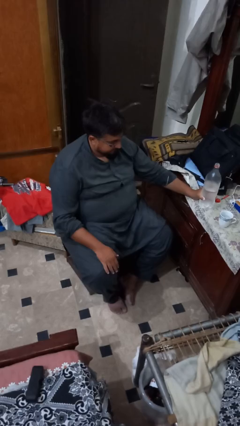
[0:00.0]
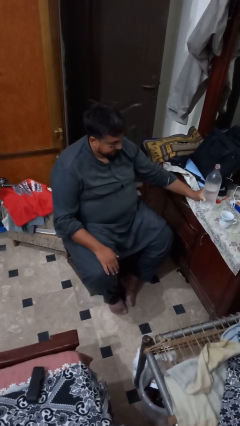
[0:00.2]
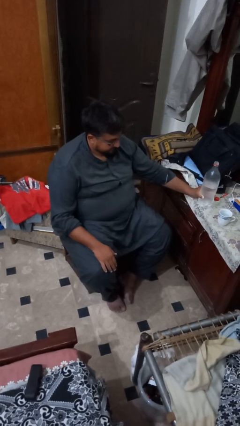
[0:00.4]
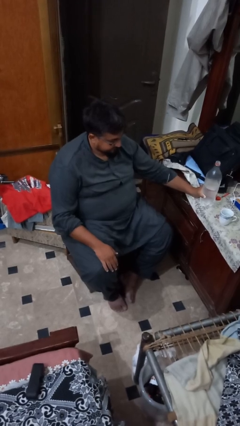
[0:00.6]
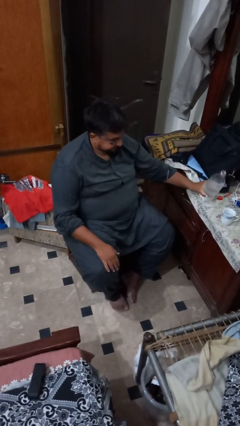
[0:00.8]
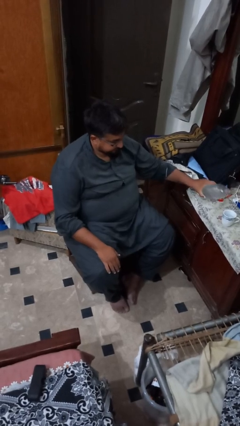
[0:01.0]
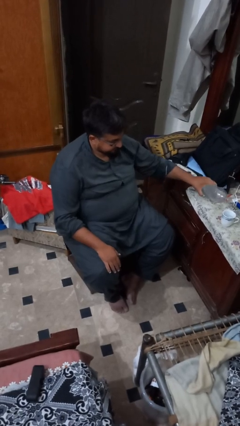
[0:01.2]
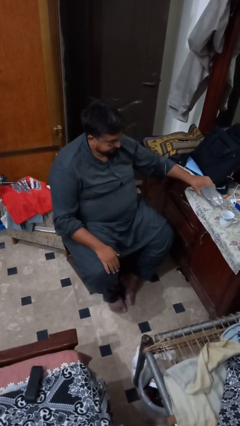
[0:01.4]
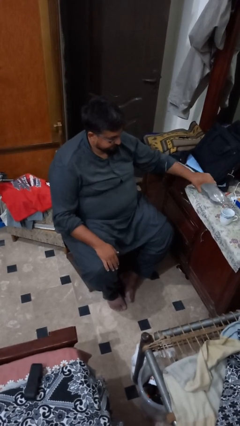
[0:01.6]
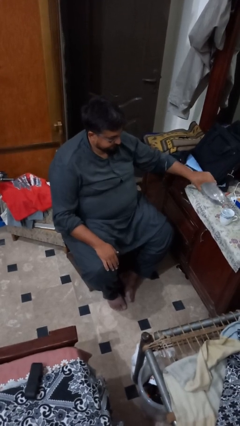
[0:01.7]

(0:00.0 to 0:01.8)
person pours liquid into cup

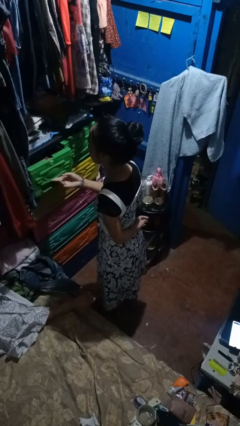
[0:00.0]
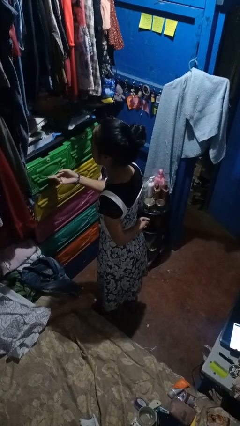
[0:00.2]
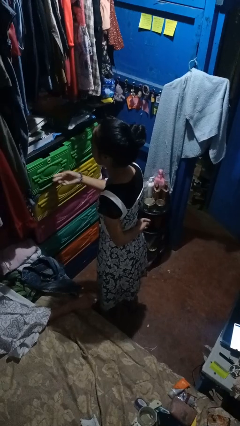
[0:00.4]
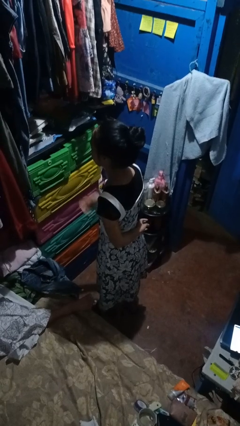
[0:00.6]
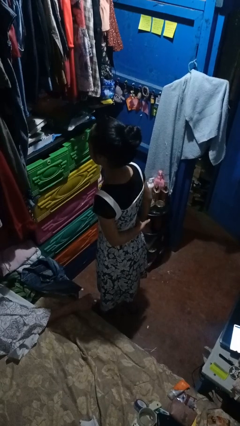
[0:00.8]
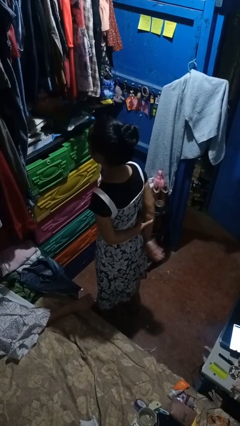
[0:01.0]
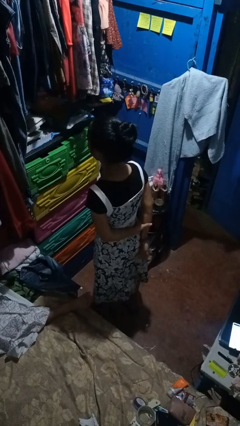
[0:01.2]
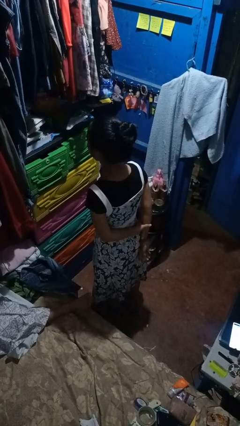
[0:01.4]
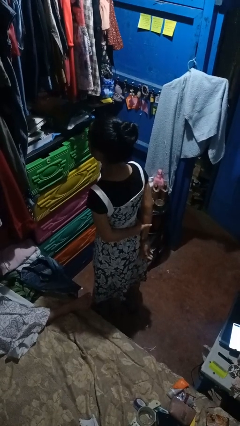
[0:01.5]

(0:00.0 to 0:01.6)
person closes dresser drawer

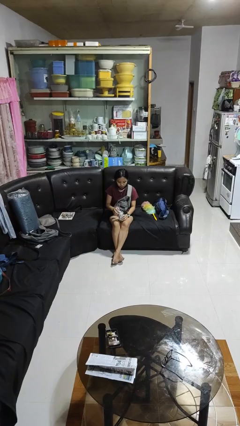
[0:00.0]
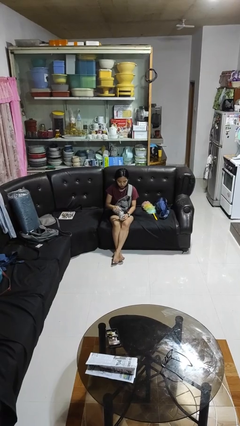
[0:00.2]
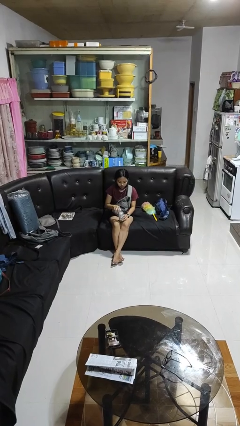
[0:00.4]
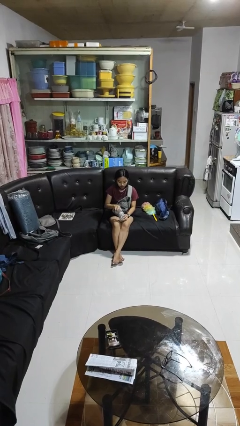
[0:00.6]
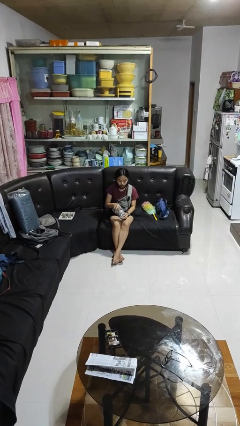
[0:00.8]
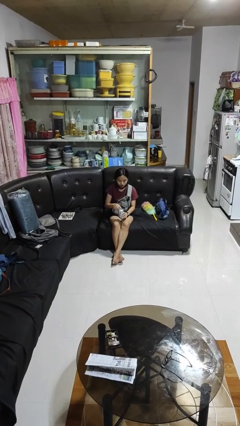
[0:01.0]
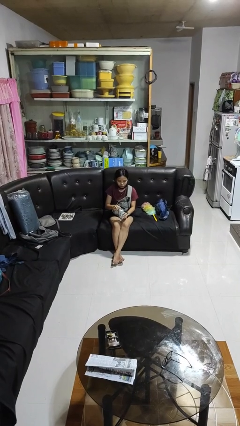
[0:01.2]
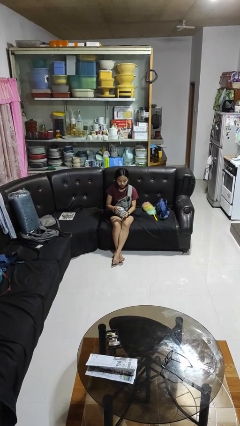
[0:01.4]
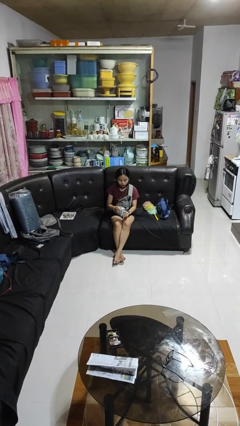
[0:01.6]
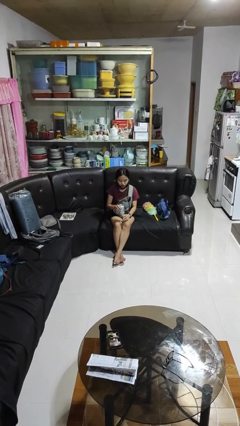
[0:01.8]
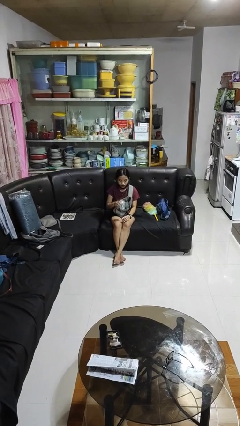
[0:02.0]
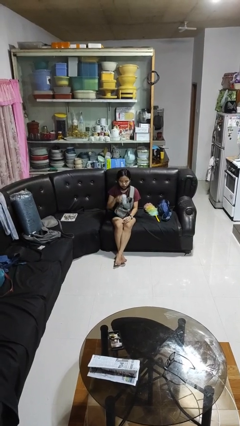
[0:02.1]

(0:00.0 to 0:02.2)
person opens beverage can

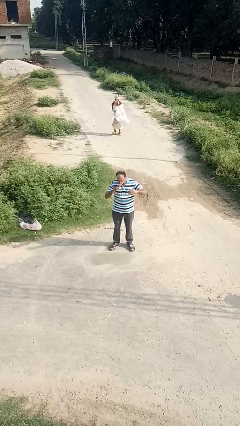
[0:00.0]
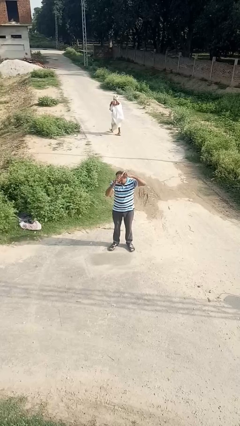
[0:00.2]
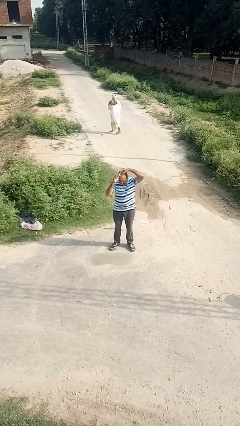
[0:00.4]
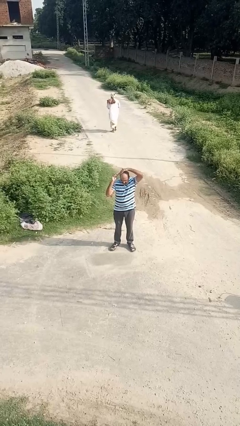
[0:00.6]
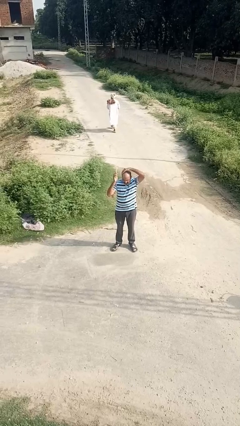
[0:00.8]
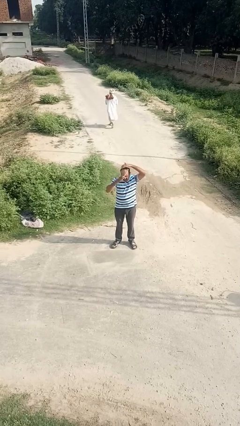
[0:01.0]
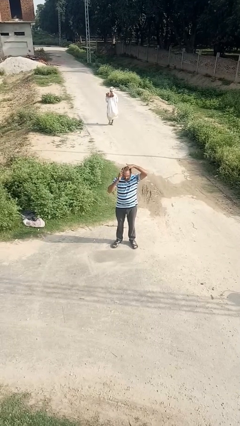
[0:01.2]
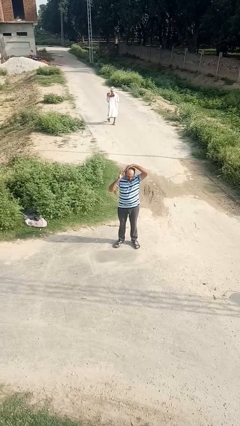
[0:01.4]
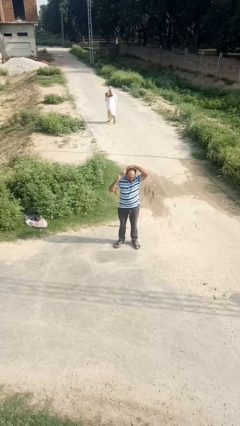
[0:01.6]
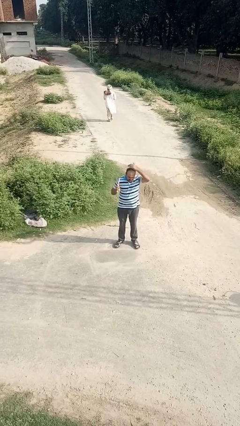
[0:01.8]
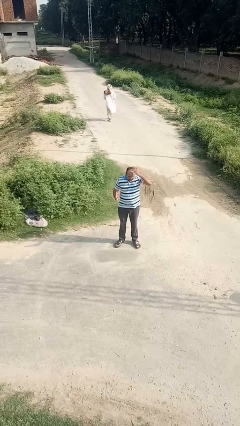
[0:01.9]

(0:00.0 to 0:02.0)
person brushes hair

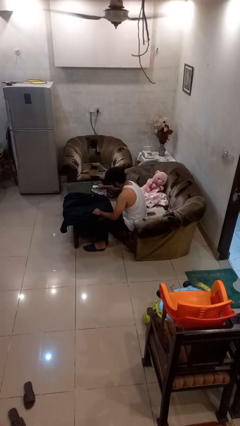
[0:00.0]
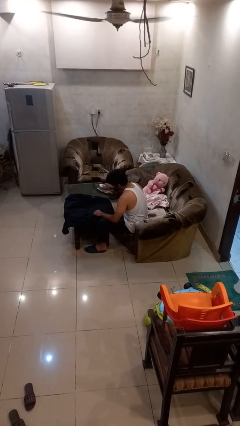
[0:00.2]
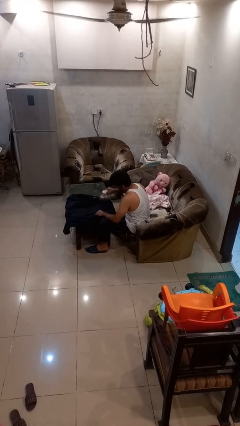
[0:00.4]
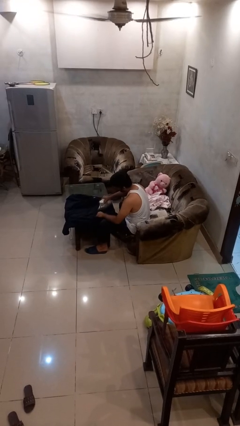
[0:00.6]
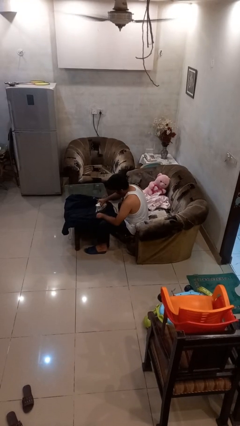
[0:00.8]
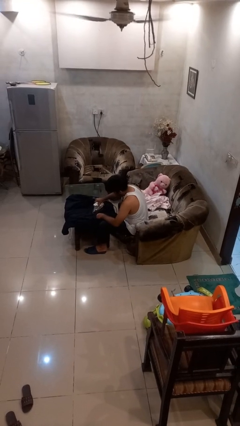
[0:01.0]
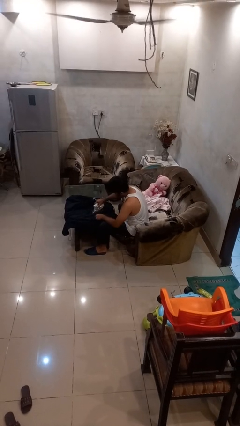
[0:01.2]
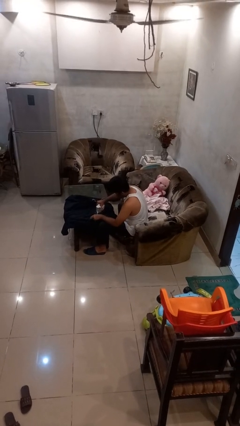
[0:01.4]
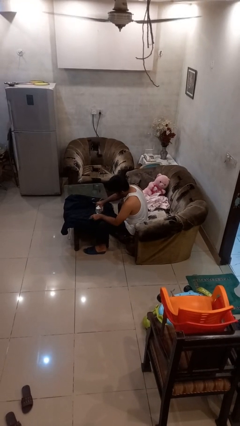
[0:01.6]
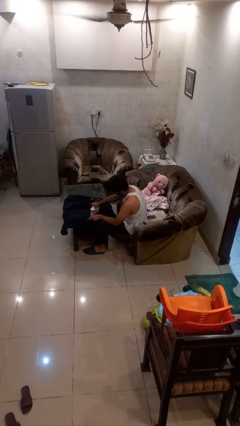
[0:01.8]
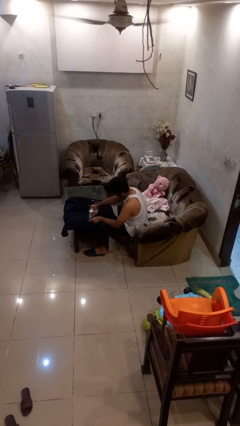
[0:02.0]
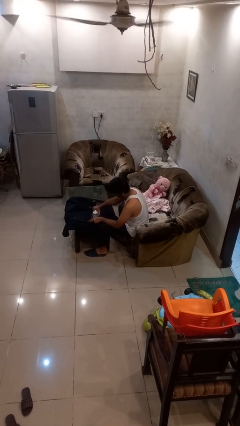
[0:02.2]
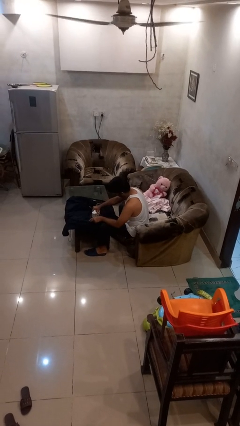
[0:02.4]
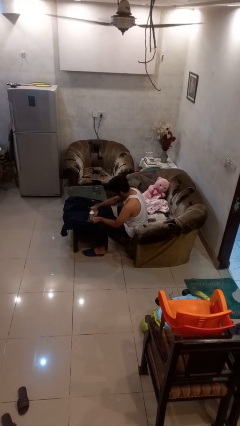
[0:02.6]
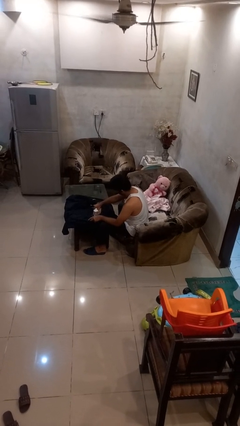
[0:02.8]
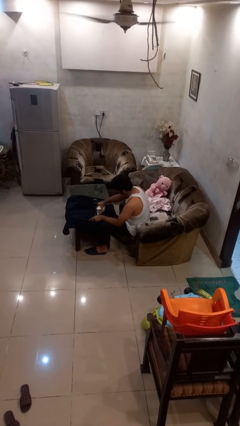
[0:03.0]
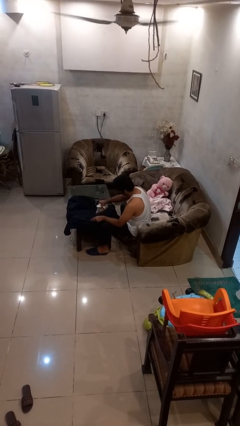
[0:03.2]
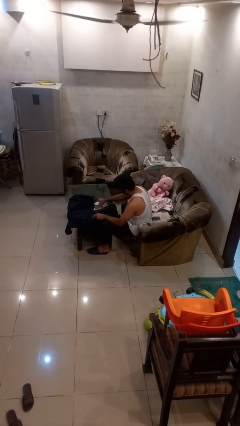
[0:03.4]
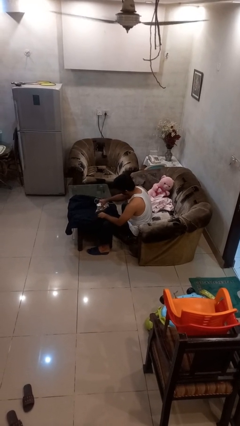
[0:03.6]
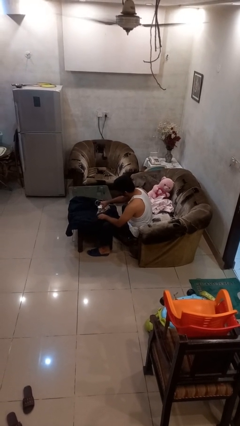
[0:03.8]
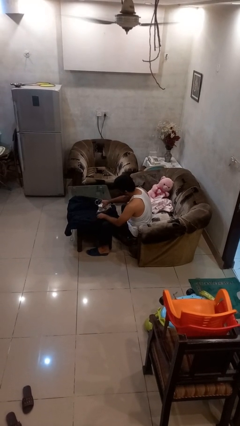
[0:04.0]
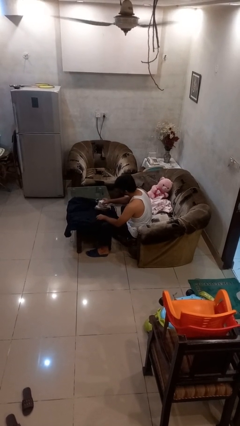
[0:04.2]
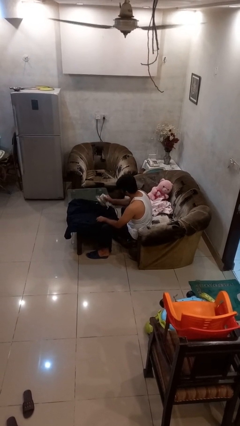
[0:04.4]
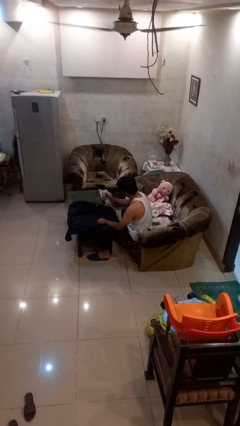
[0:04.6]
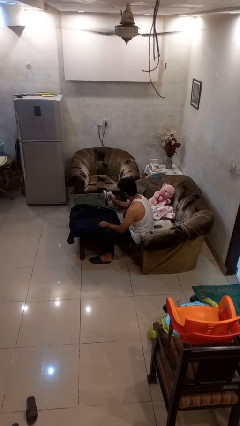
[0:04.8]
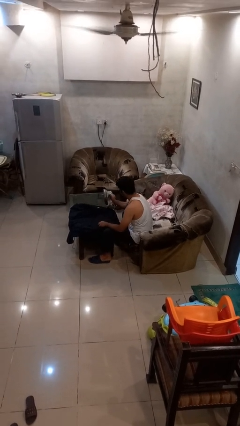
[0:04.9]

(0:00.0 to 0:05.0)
person irons clothes

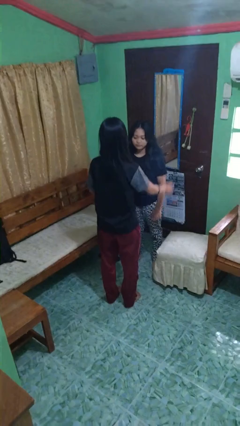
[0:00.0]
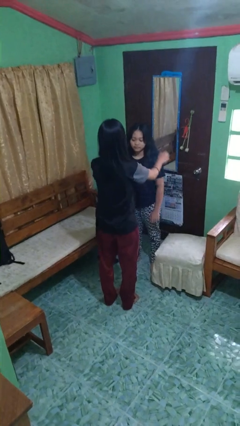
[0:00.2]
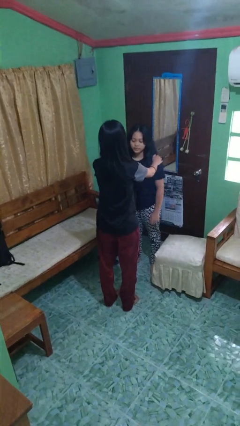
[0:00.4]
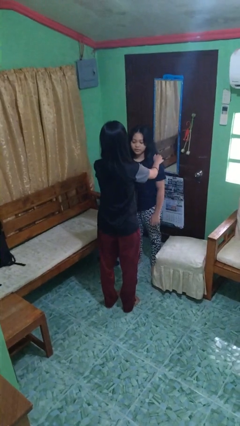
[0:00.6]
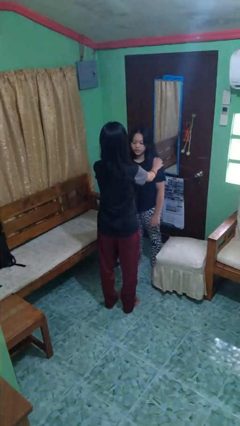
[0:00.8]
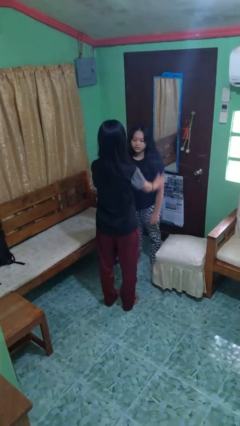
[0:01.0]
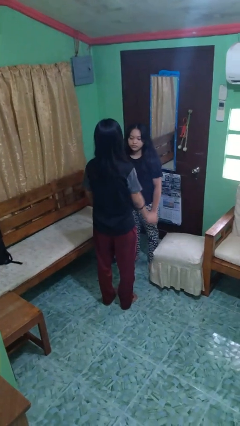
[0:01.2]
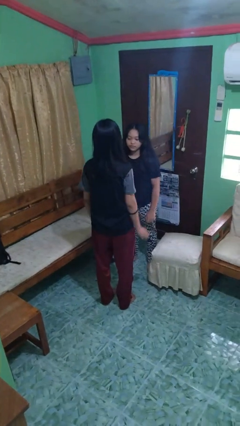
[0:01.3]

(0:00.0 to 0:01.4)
person pounds shoulders of person

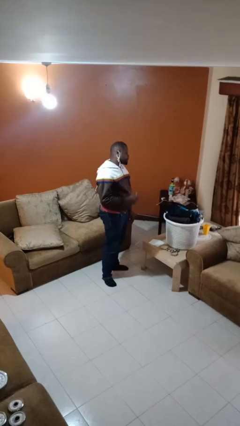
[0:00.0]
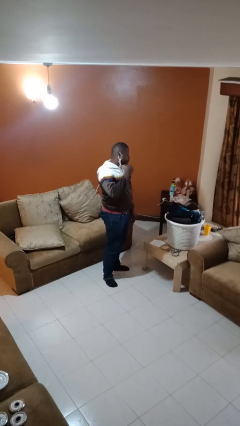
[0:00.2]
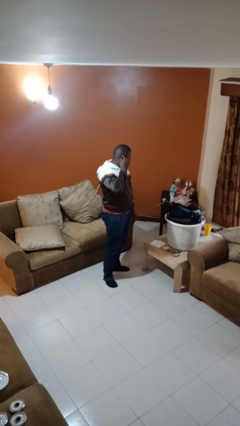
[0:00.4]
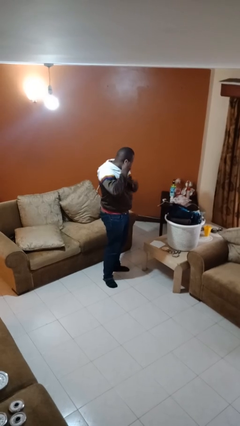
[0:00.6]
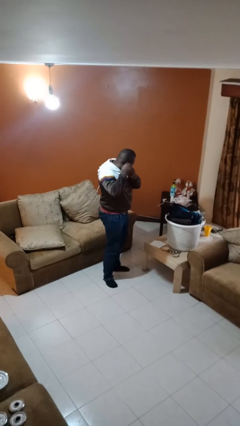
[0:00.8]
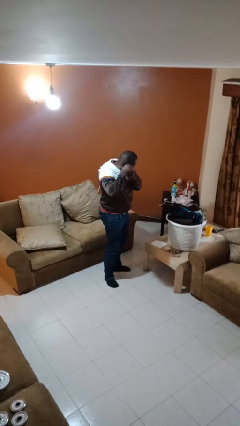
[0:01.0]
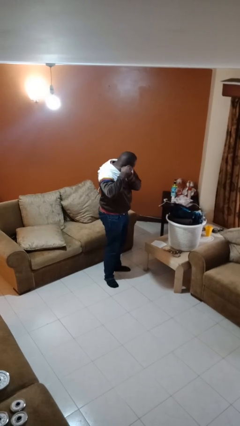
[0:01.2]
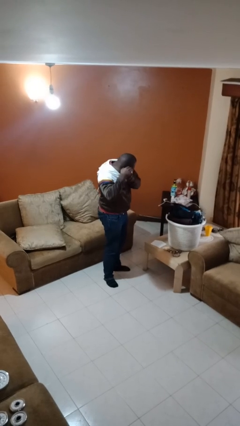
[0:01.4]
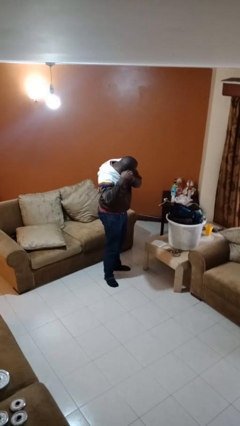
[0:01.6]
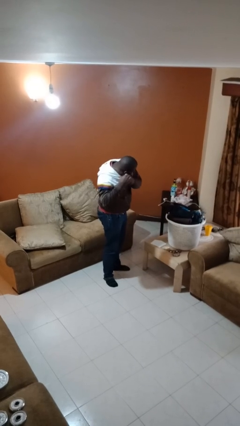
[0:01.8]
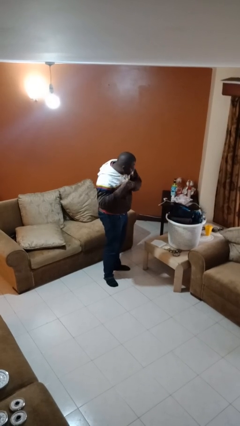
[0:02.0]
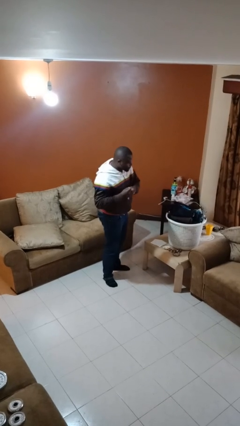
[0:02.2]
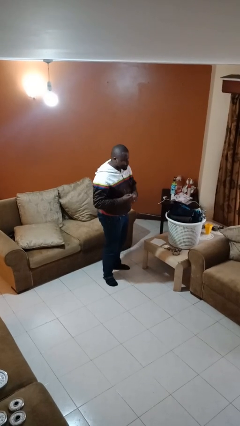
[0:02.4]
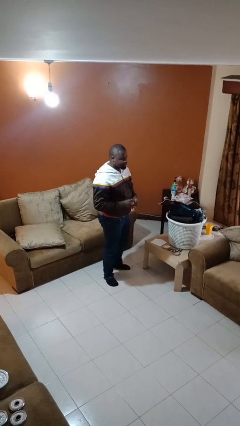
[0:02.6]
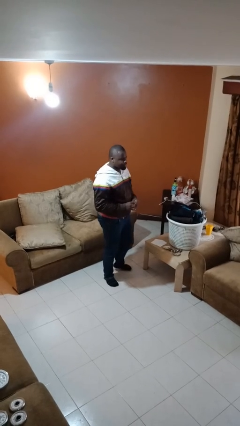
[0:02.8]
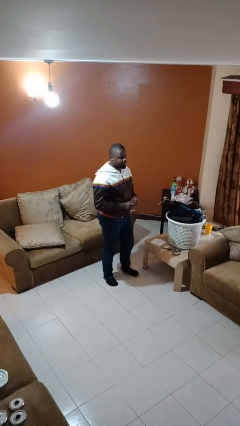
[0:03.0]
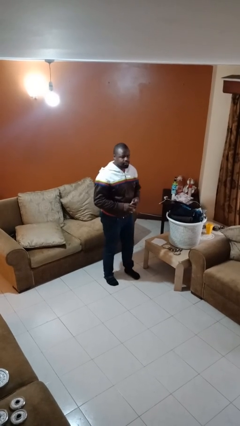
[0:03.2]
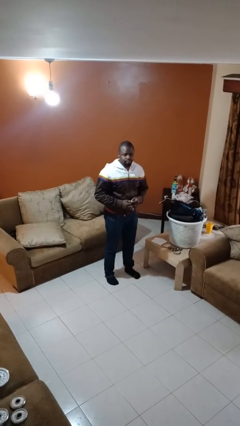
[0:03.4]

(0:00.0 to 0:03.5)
person takes off earrings
